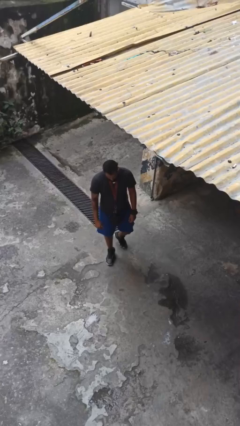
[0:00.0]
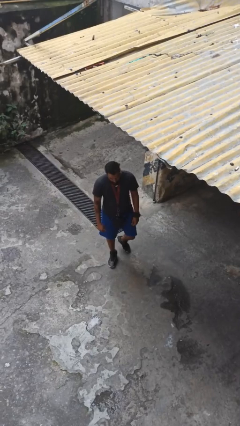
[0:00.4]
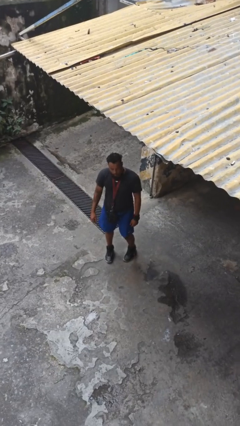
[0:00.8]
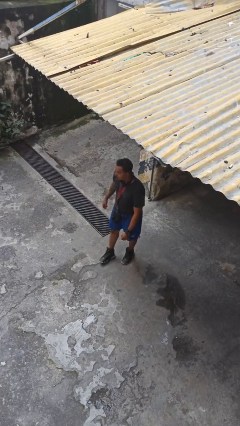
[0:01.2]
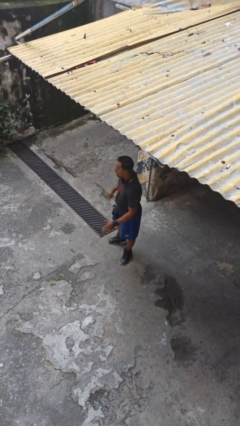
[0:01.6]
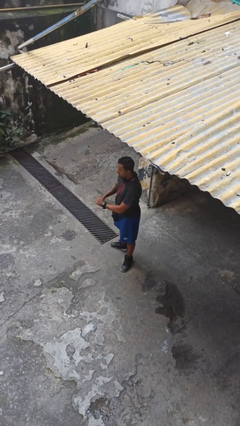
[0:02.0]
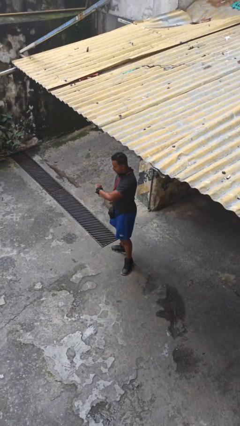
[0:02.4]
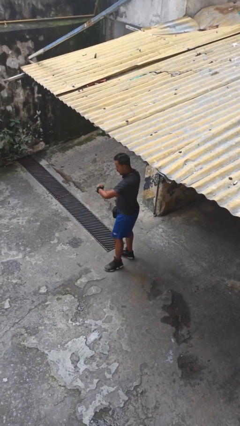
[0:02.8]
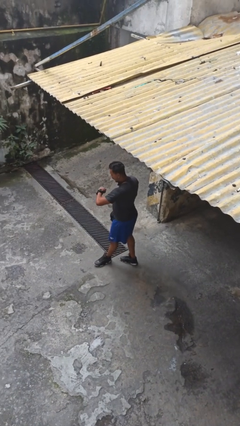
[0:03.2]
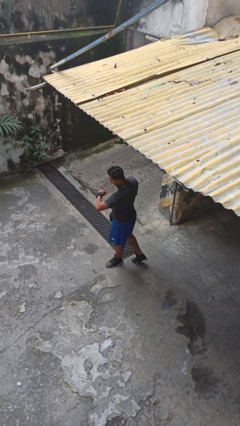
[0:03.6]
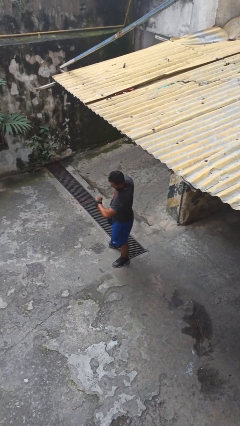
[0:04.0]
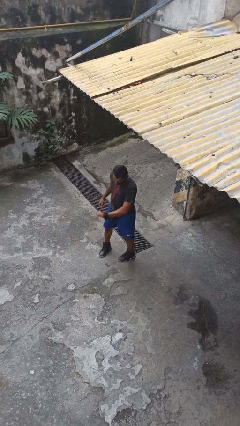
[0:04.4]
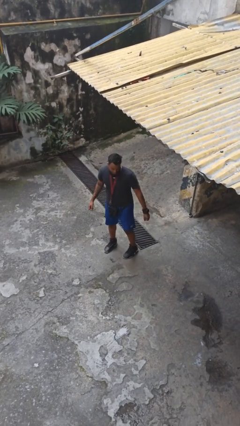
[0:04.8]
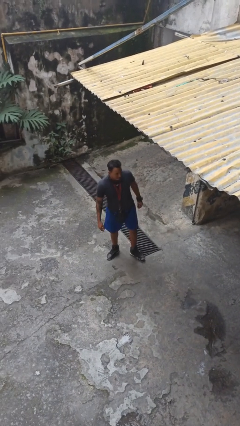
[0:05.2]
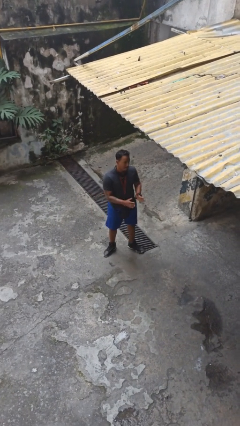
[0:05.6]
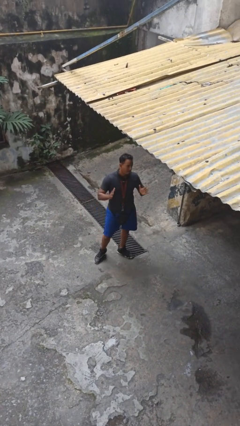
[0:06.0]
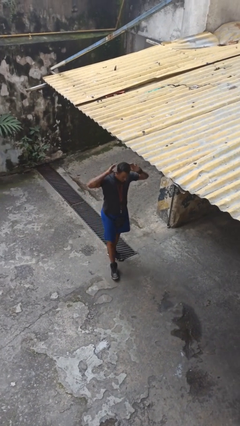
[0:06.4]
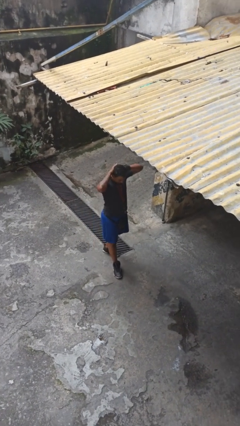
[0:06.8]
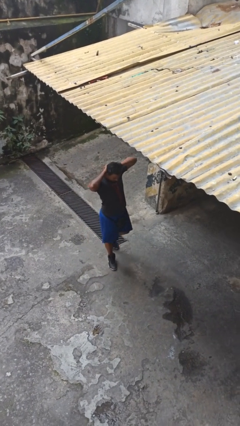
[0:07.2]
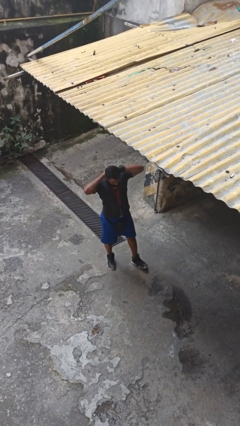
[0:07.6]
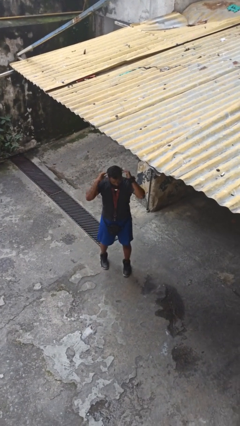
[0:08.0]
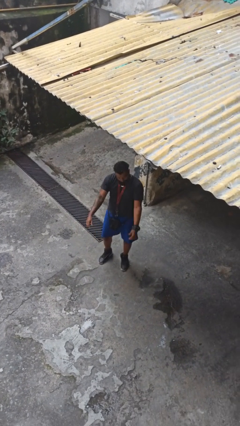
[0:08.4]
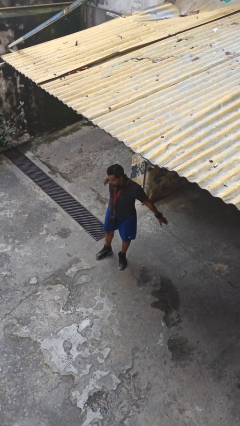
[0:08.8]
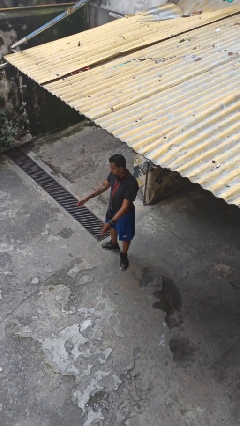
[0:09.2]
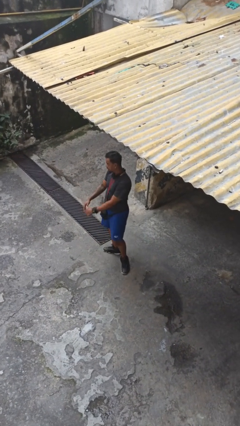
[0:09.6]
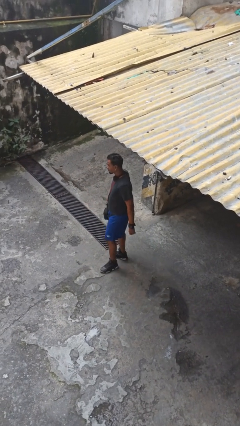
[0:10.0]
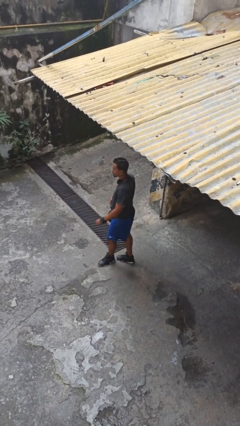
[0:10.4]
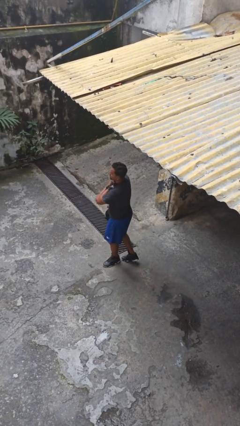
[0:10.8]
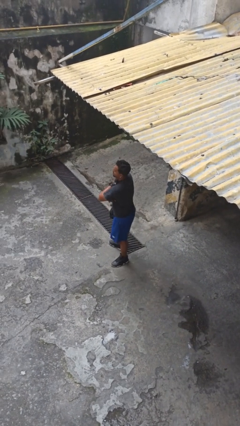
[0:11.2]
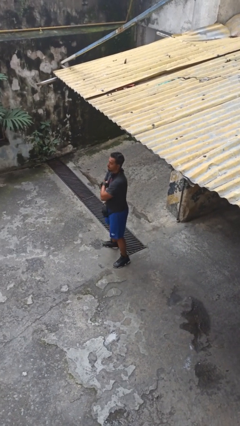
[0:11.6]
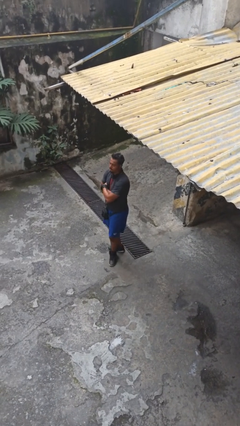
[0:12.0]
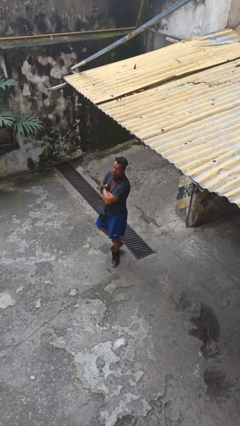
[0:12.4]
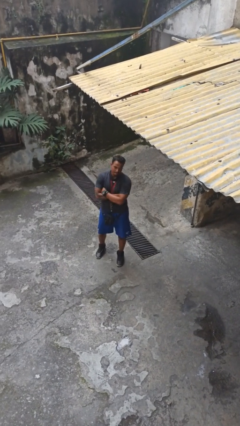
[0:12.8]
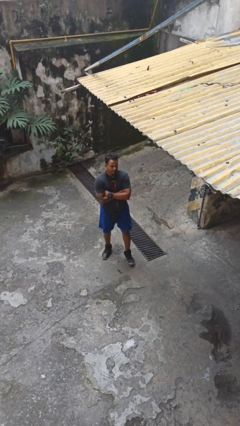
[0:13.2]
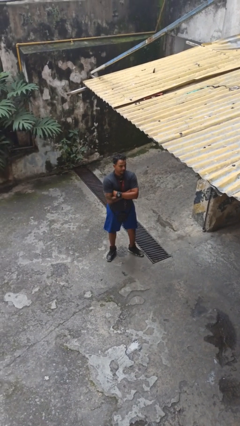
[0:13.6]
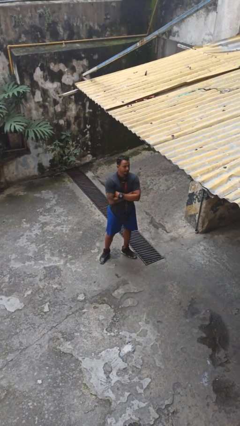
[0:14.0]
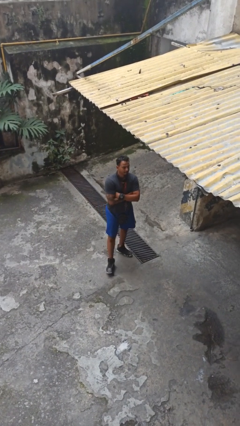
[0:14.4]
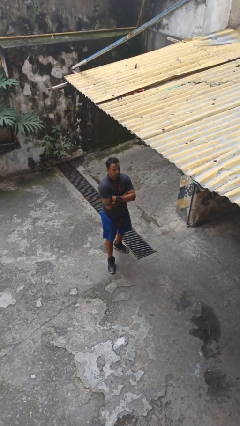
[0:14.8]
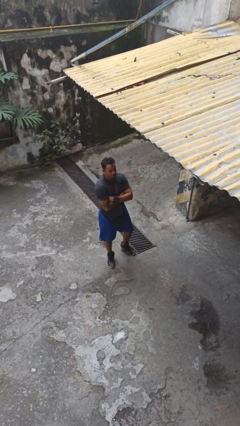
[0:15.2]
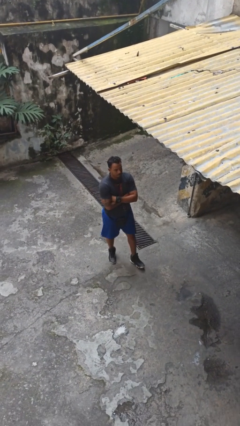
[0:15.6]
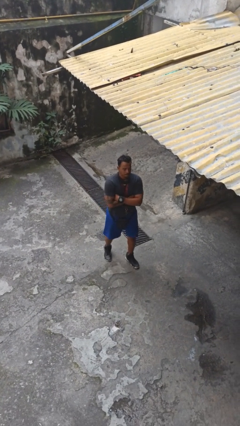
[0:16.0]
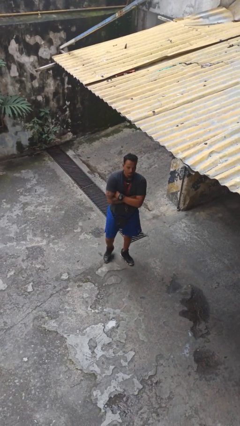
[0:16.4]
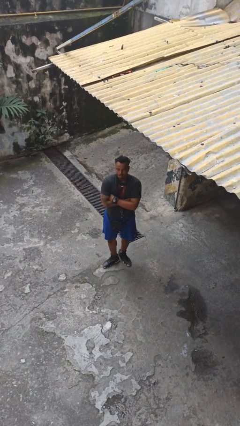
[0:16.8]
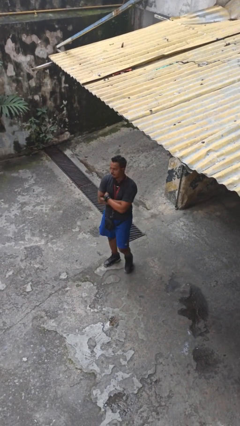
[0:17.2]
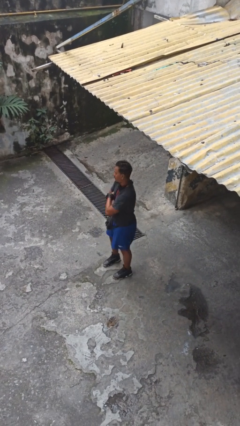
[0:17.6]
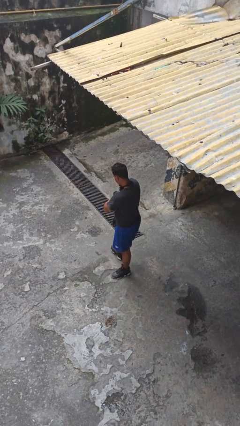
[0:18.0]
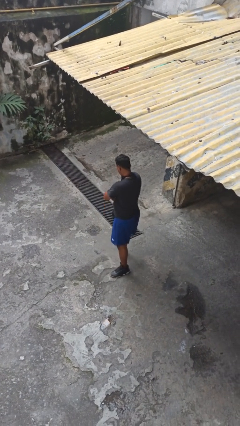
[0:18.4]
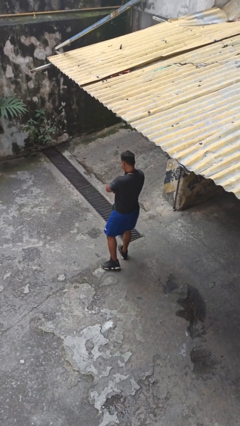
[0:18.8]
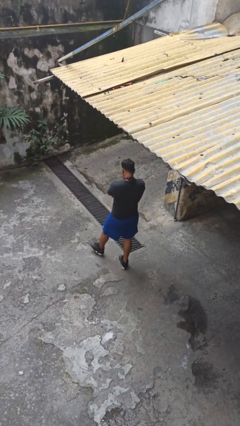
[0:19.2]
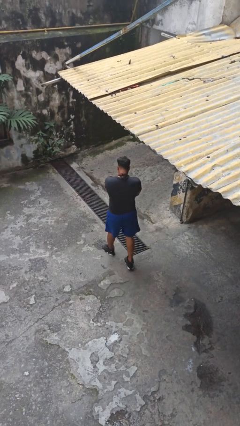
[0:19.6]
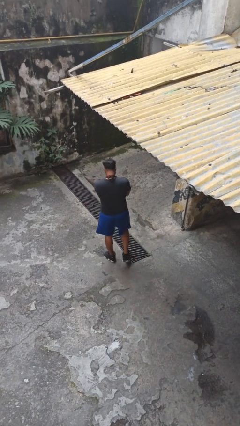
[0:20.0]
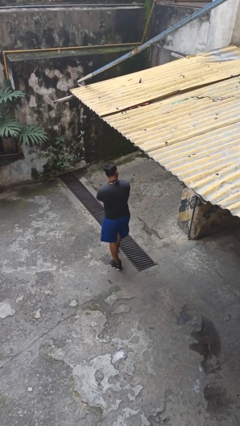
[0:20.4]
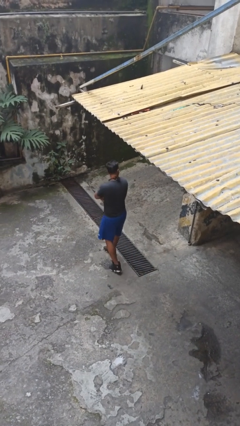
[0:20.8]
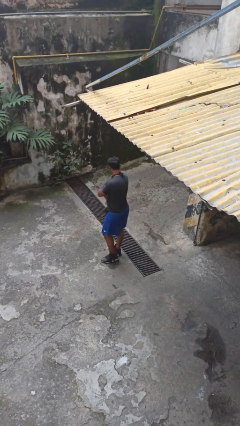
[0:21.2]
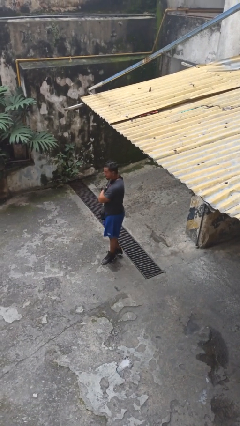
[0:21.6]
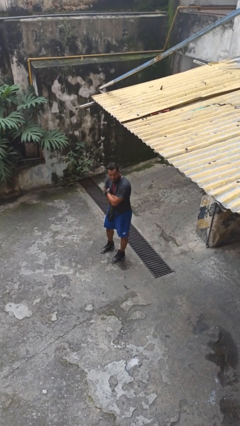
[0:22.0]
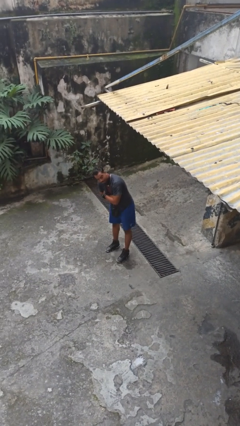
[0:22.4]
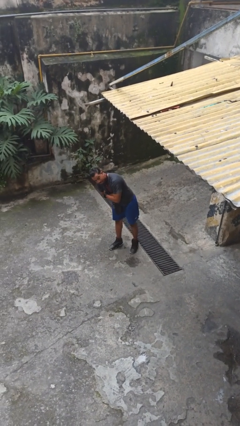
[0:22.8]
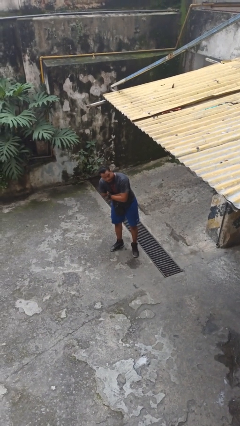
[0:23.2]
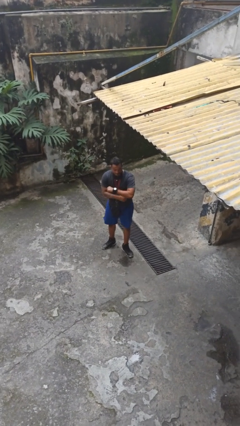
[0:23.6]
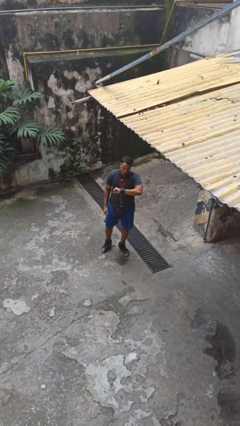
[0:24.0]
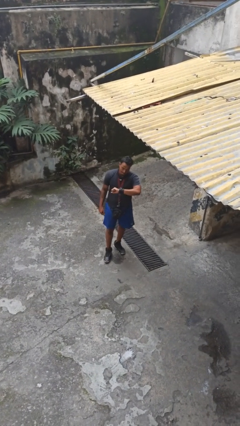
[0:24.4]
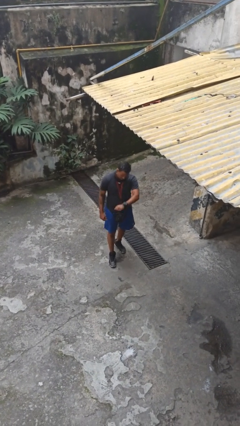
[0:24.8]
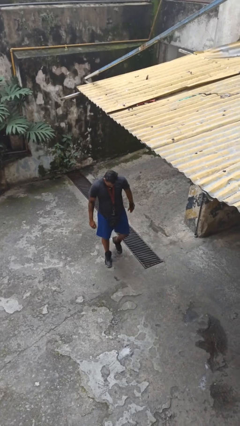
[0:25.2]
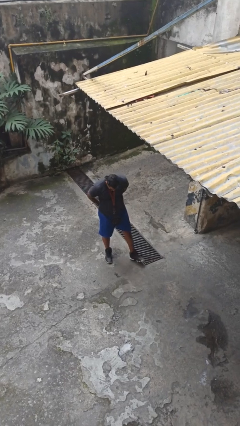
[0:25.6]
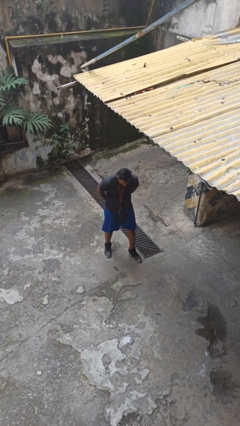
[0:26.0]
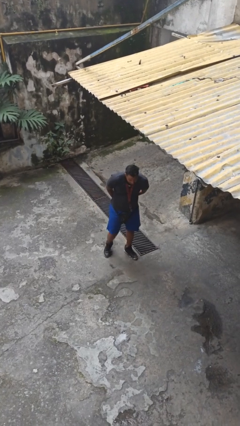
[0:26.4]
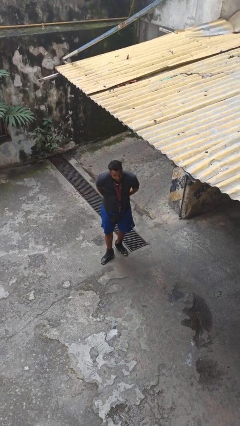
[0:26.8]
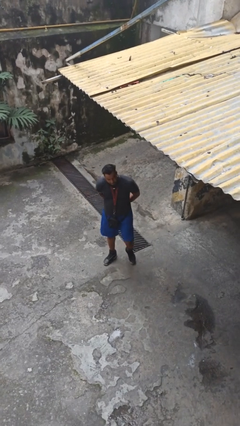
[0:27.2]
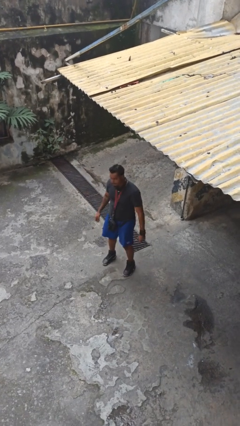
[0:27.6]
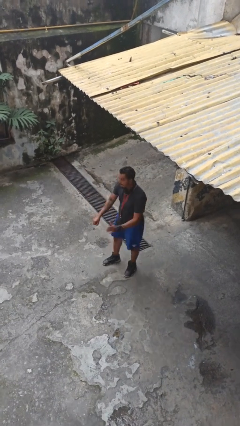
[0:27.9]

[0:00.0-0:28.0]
person walks

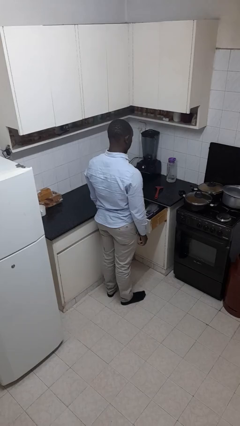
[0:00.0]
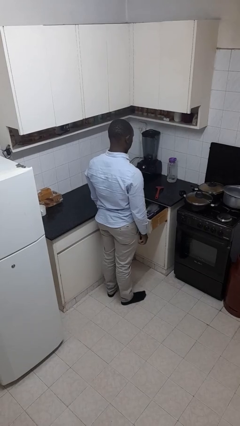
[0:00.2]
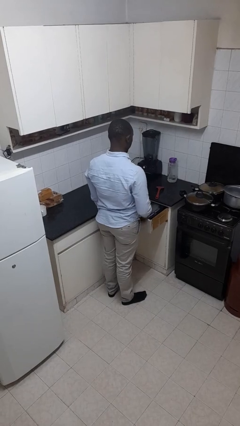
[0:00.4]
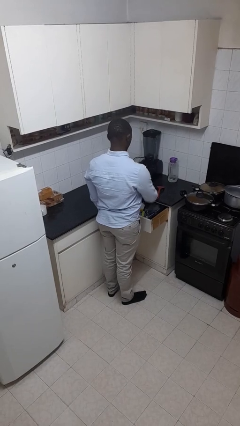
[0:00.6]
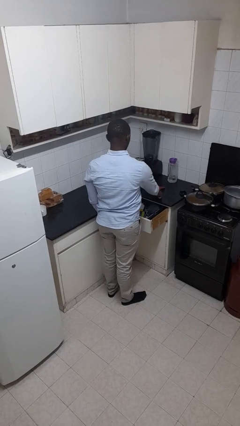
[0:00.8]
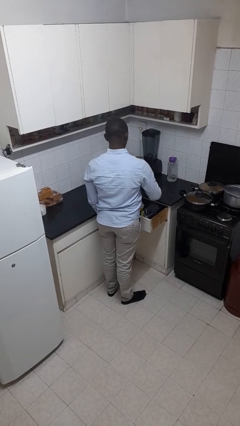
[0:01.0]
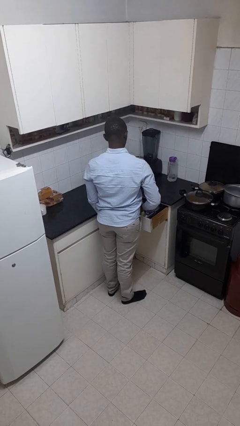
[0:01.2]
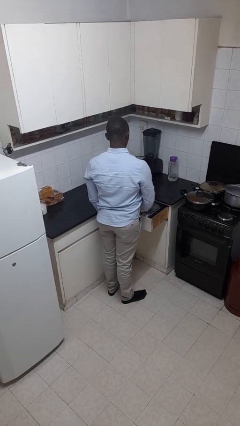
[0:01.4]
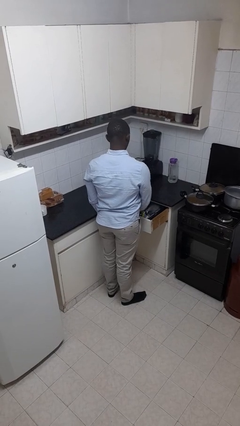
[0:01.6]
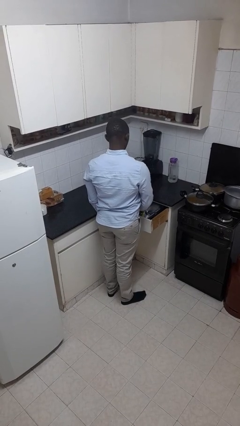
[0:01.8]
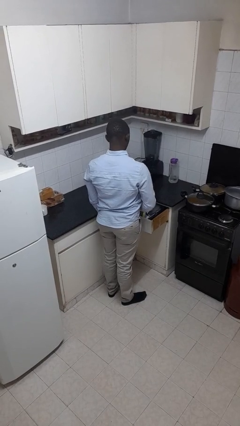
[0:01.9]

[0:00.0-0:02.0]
person puts object into kitchen drawer

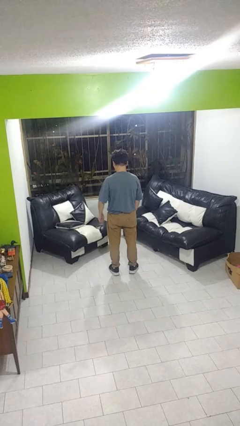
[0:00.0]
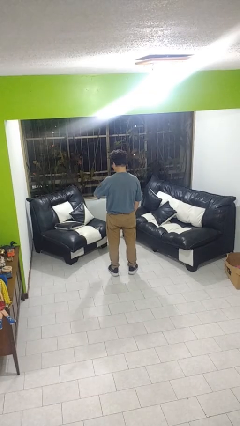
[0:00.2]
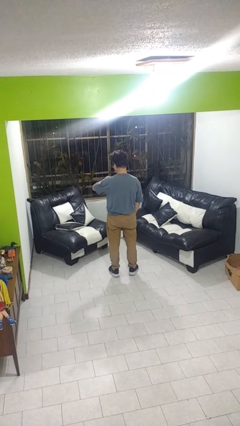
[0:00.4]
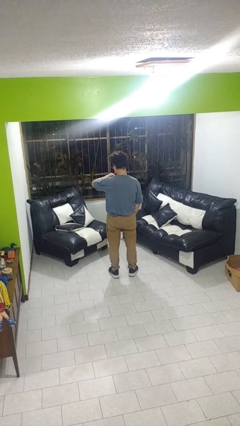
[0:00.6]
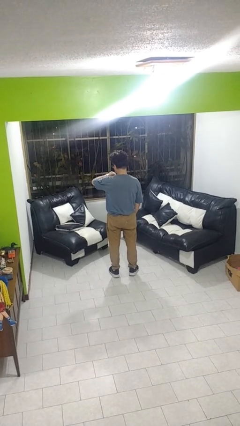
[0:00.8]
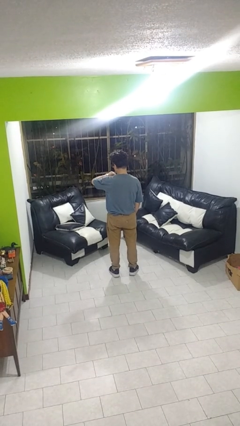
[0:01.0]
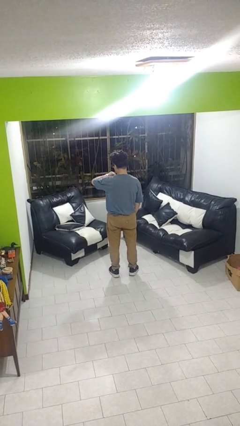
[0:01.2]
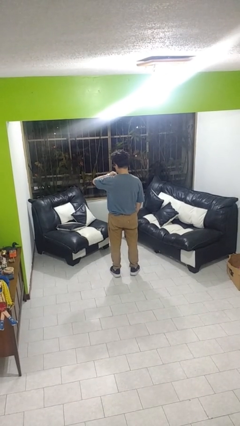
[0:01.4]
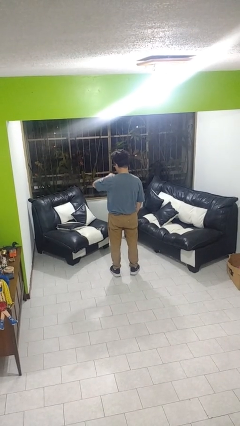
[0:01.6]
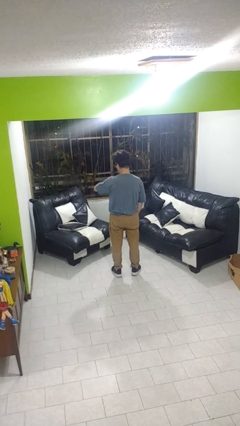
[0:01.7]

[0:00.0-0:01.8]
person looks at wristwatch
